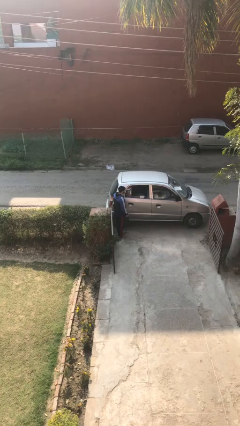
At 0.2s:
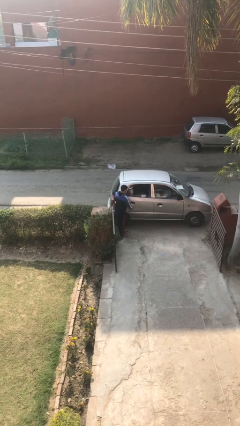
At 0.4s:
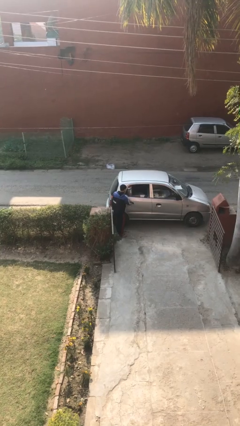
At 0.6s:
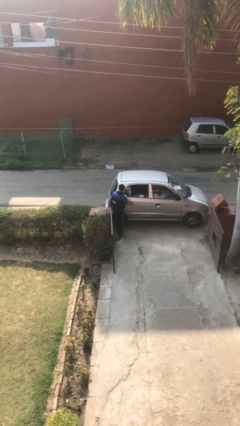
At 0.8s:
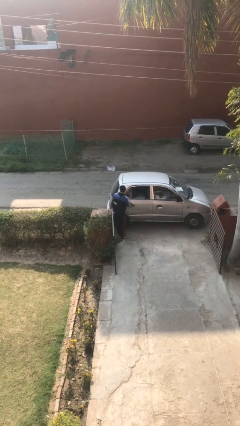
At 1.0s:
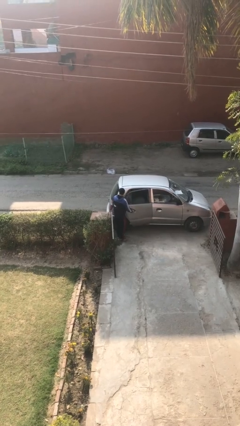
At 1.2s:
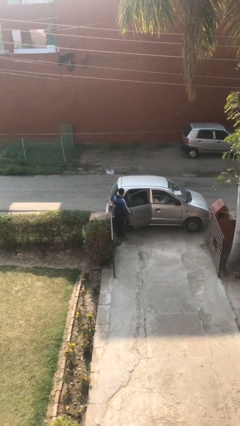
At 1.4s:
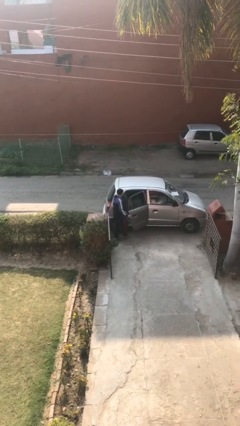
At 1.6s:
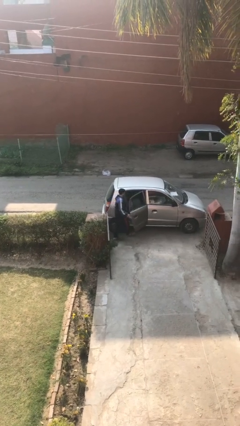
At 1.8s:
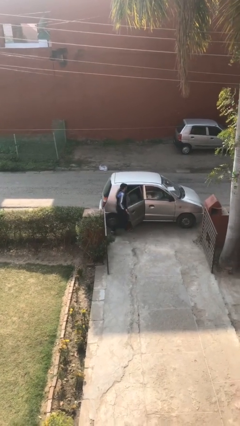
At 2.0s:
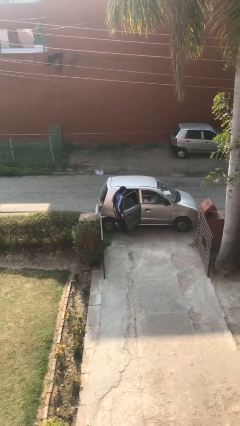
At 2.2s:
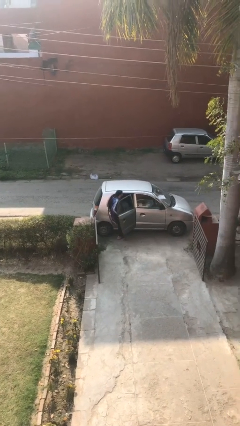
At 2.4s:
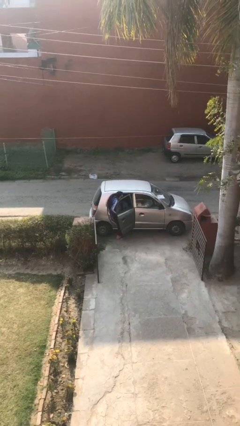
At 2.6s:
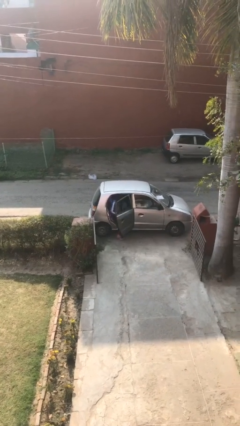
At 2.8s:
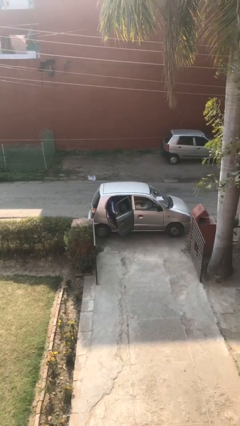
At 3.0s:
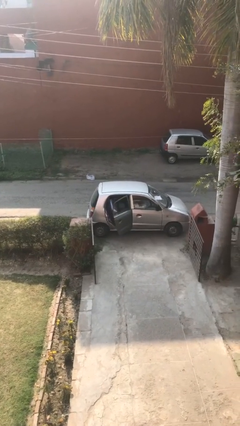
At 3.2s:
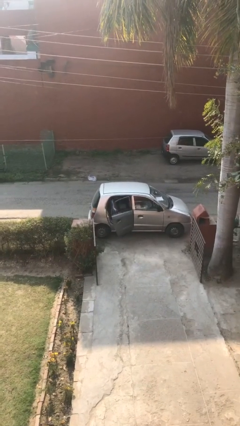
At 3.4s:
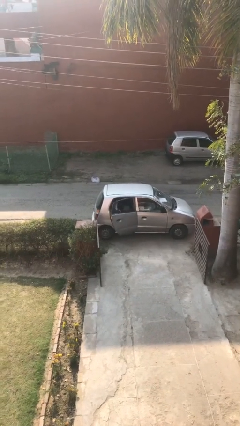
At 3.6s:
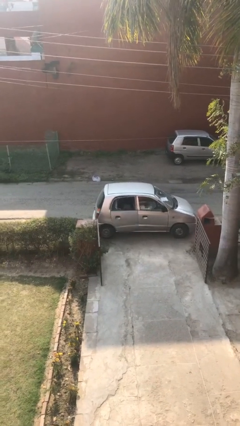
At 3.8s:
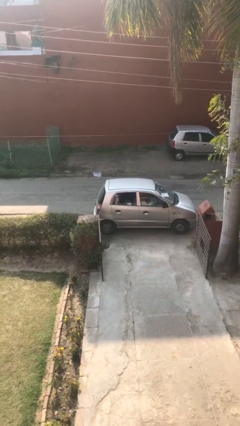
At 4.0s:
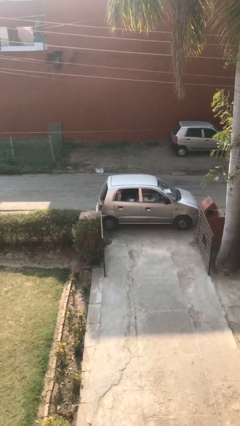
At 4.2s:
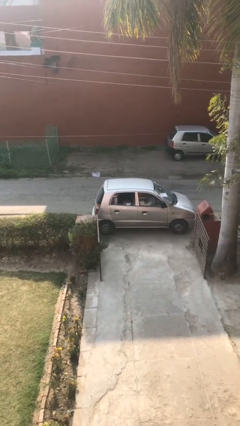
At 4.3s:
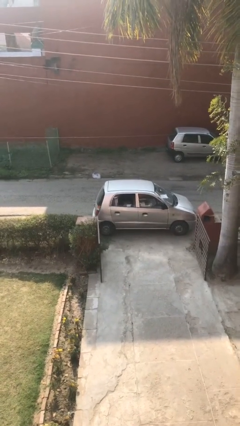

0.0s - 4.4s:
car picks up person

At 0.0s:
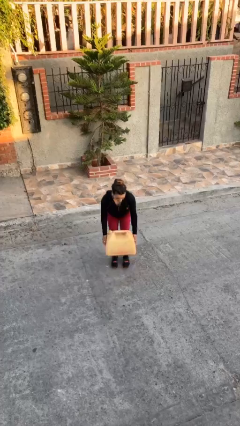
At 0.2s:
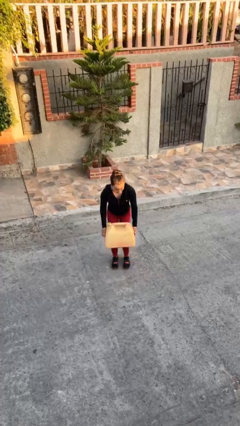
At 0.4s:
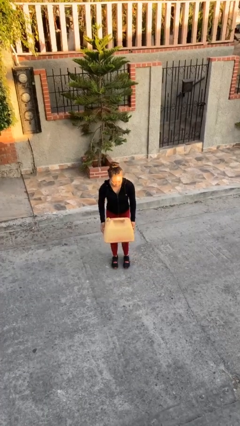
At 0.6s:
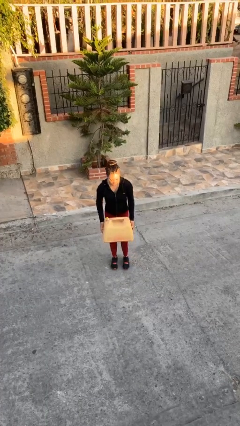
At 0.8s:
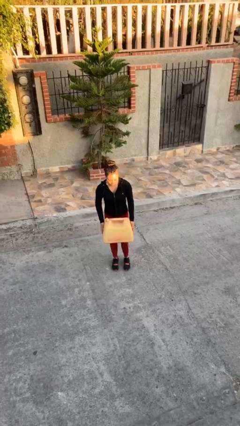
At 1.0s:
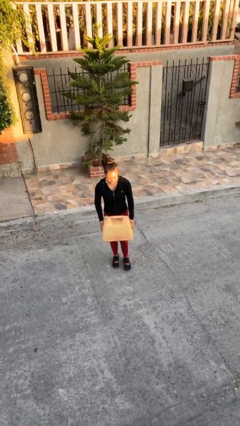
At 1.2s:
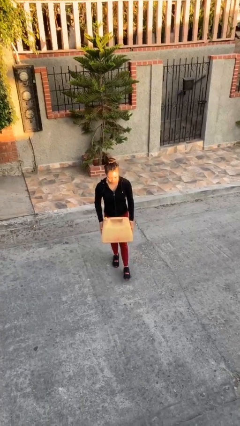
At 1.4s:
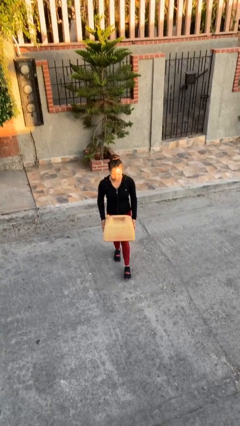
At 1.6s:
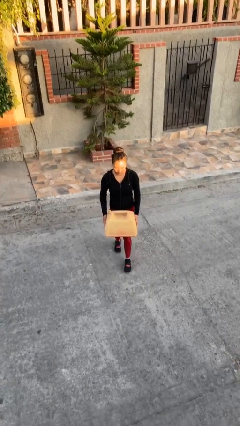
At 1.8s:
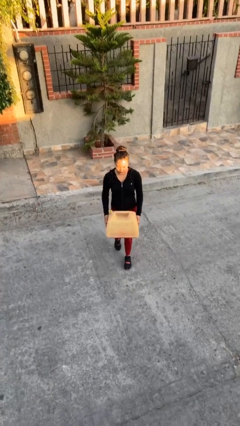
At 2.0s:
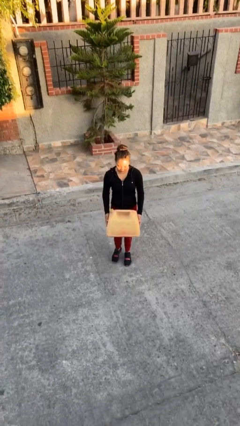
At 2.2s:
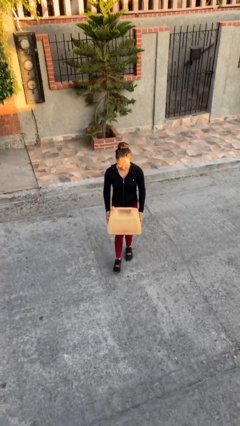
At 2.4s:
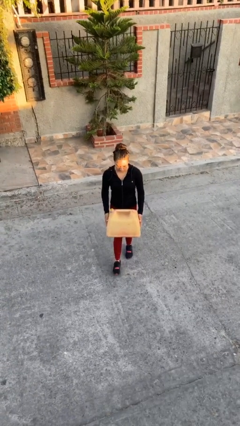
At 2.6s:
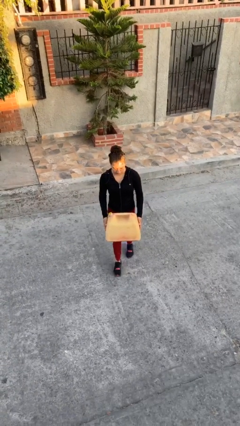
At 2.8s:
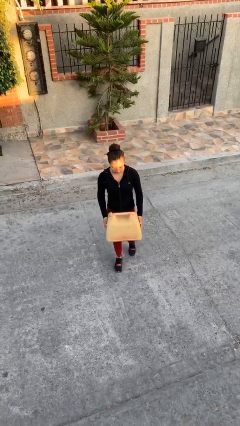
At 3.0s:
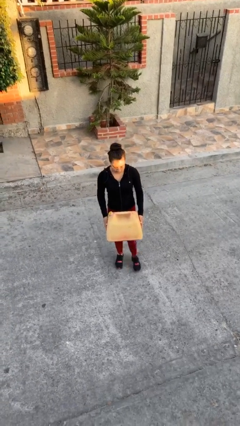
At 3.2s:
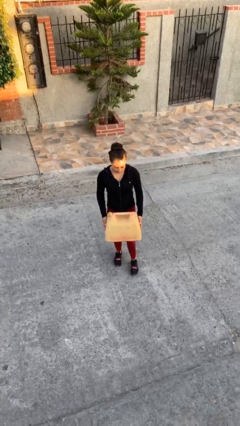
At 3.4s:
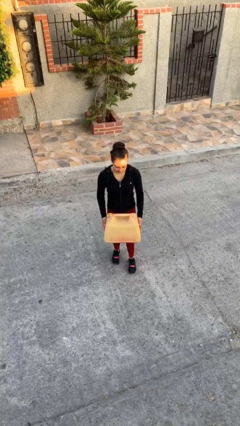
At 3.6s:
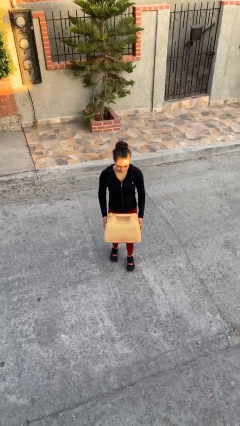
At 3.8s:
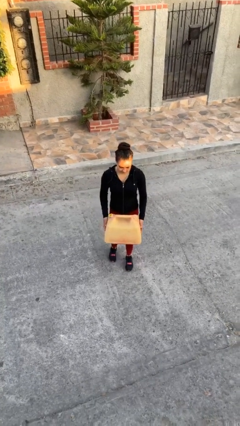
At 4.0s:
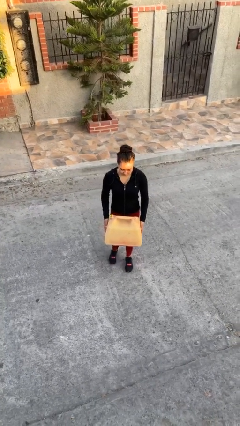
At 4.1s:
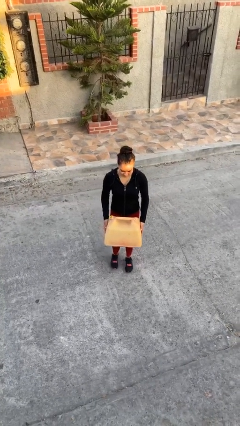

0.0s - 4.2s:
person carries heavy object

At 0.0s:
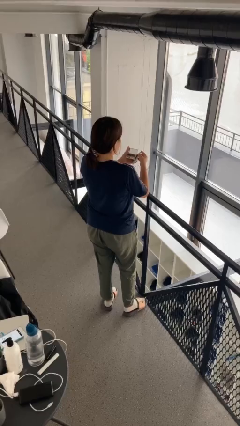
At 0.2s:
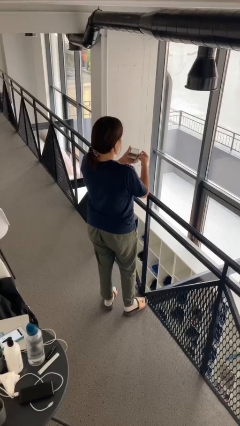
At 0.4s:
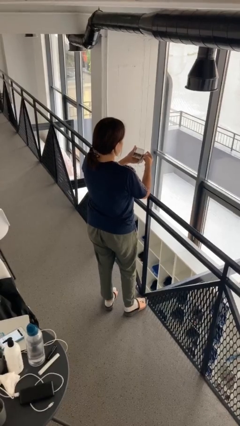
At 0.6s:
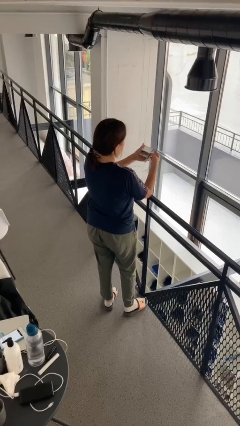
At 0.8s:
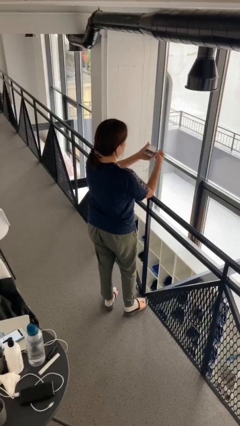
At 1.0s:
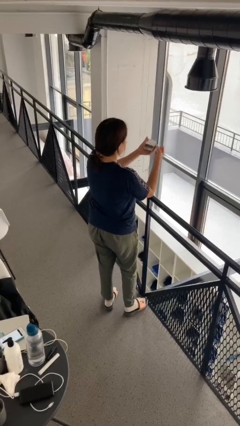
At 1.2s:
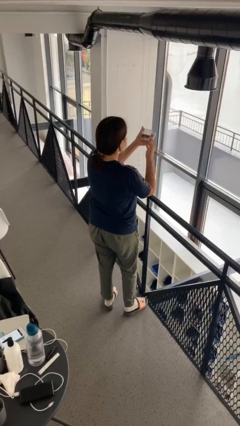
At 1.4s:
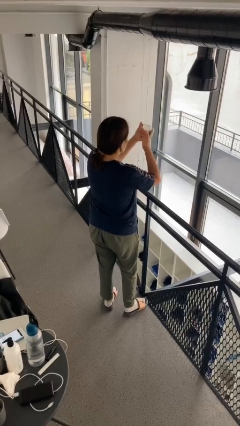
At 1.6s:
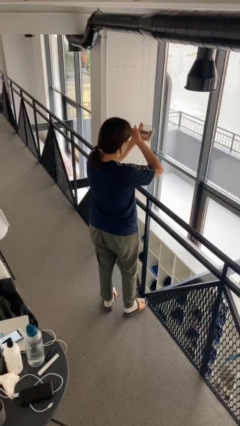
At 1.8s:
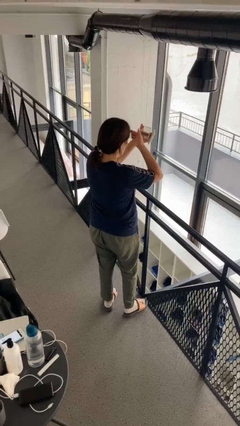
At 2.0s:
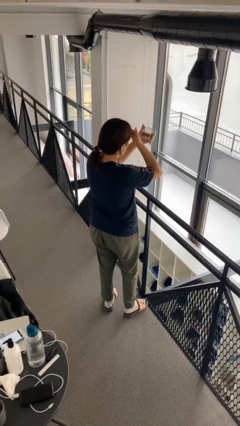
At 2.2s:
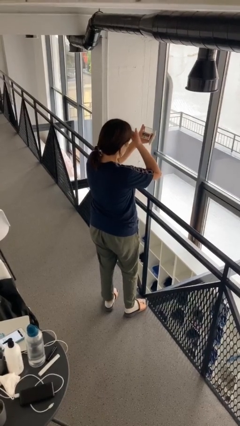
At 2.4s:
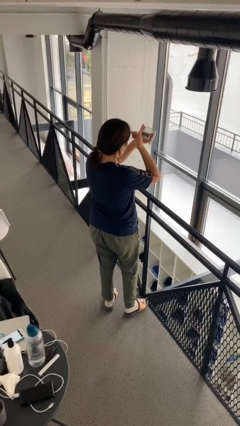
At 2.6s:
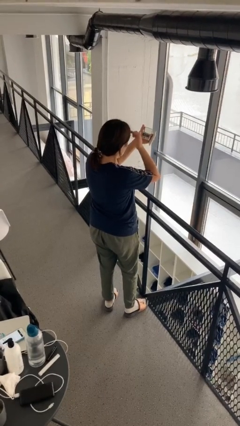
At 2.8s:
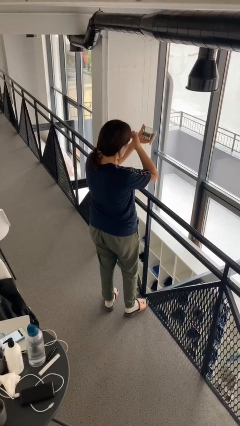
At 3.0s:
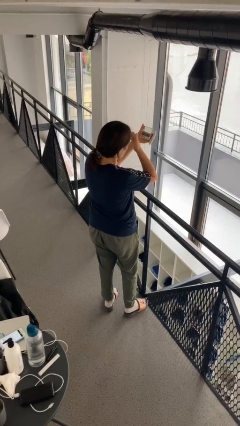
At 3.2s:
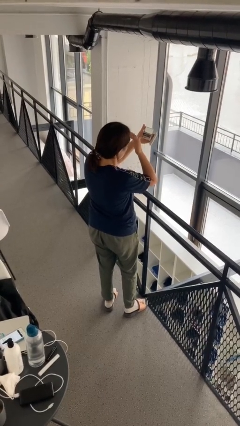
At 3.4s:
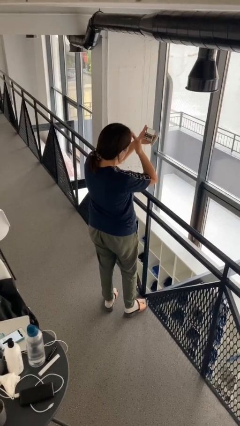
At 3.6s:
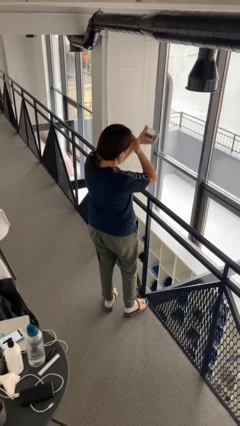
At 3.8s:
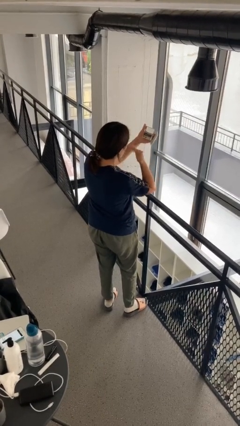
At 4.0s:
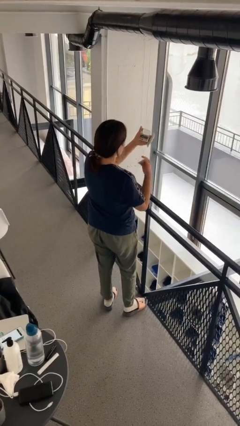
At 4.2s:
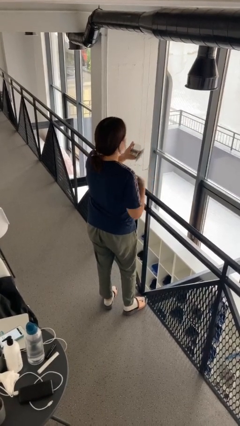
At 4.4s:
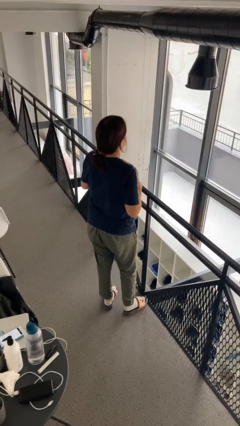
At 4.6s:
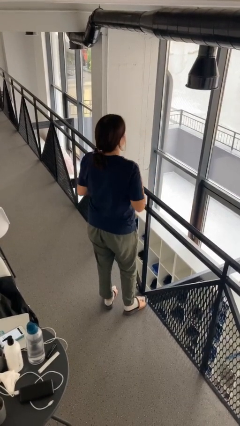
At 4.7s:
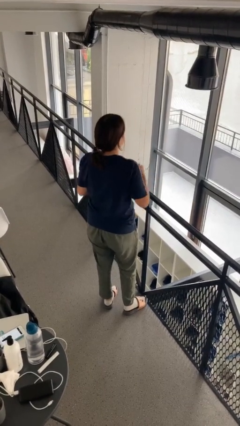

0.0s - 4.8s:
person applies foundation makeup

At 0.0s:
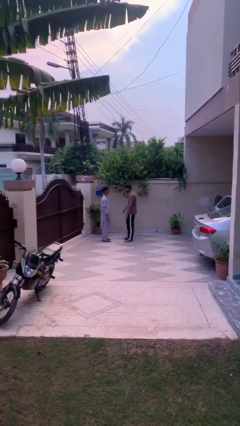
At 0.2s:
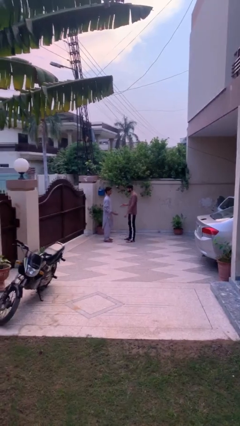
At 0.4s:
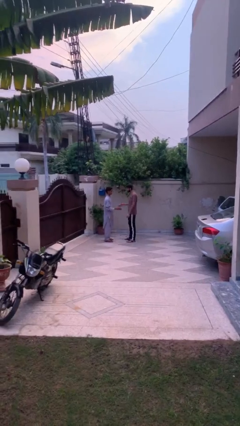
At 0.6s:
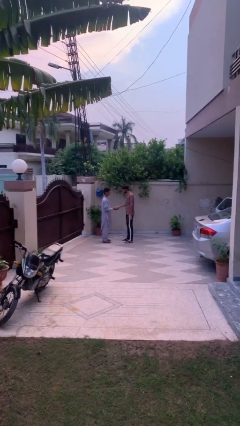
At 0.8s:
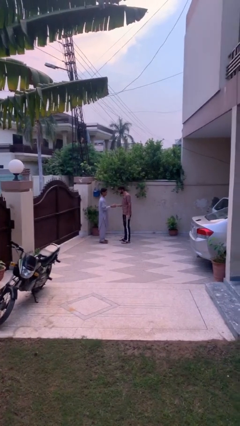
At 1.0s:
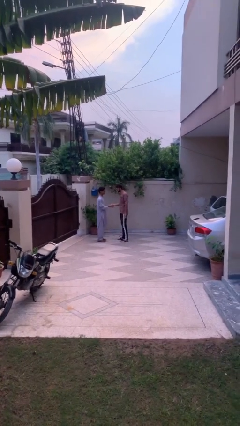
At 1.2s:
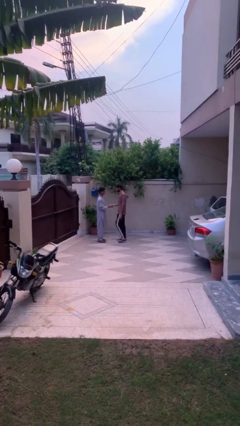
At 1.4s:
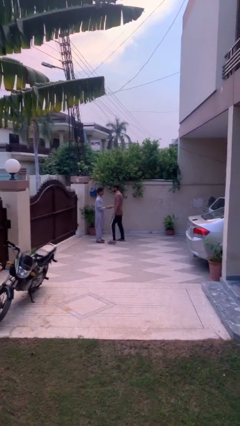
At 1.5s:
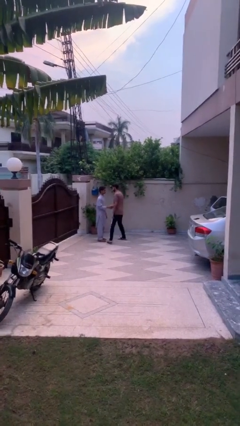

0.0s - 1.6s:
person shakes hand

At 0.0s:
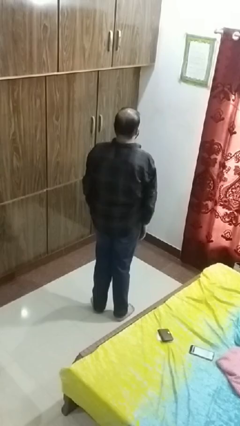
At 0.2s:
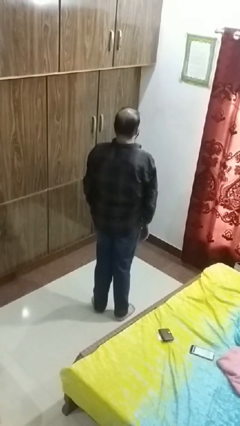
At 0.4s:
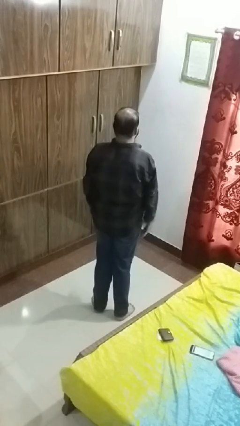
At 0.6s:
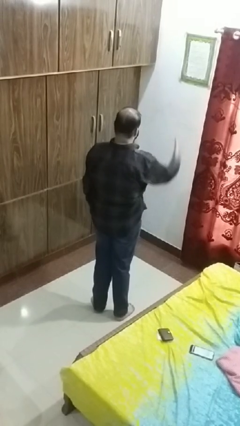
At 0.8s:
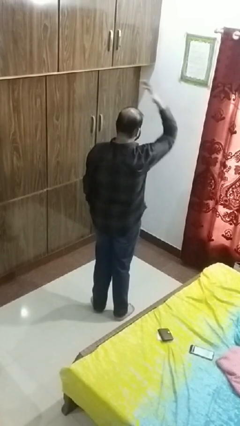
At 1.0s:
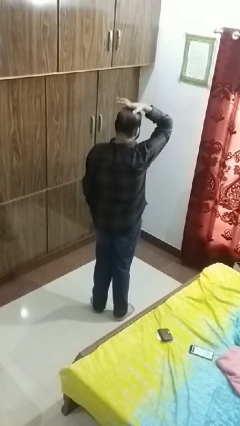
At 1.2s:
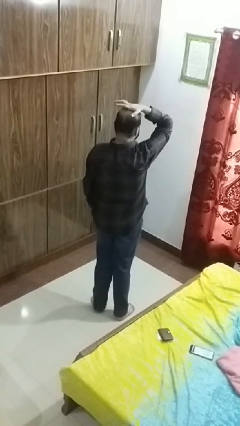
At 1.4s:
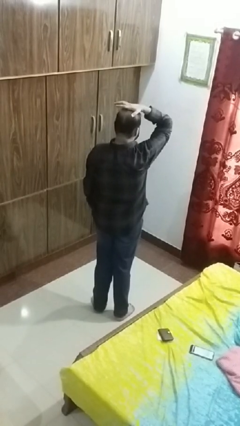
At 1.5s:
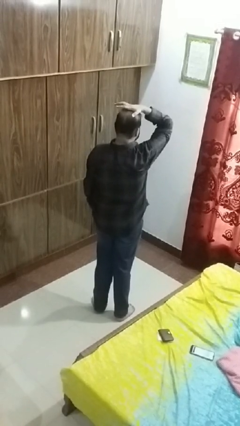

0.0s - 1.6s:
person pats head

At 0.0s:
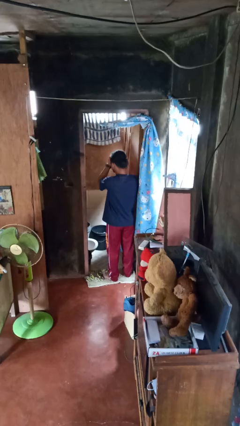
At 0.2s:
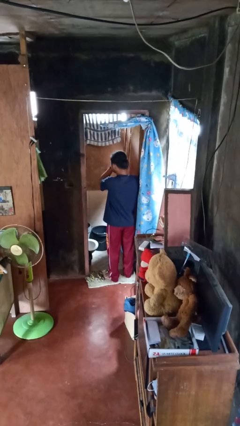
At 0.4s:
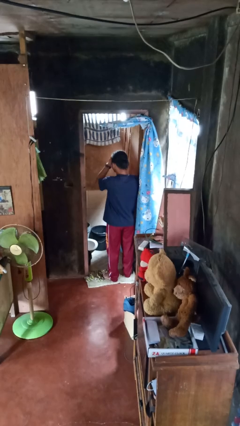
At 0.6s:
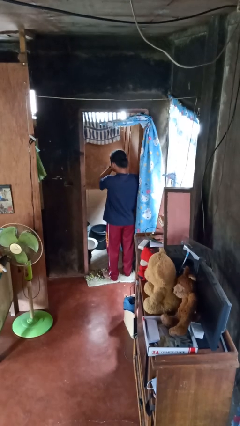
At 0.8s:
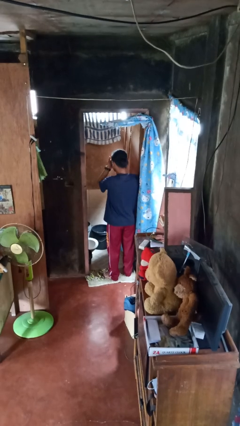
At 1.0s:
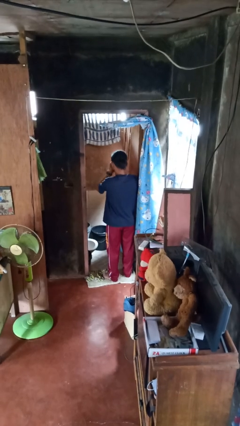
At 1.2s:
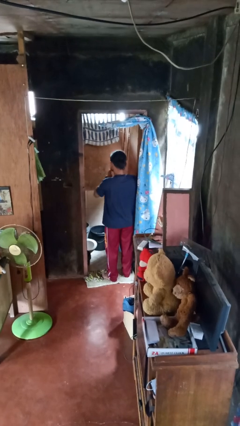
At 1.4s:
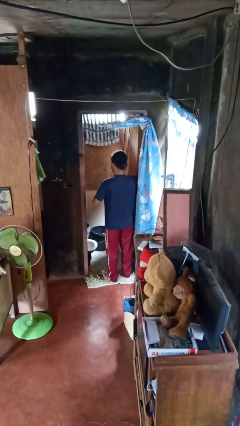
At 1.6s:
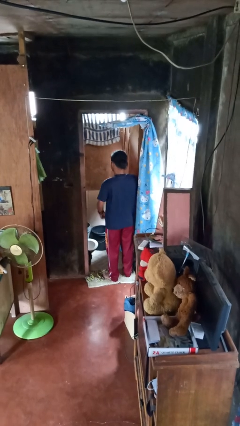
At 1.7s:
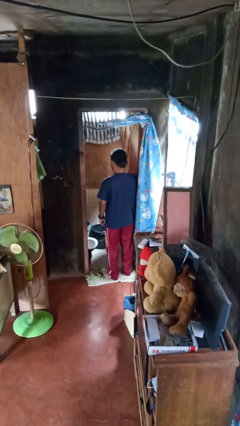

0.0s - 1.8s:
person applies facial moisturizer
